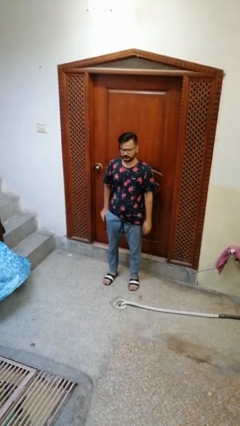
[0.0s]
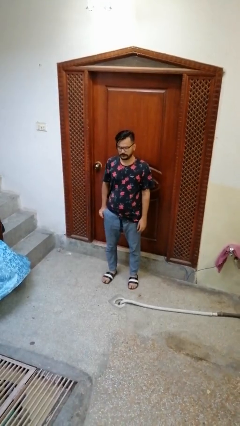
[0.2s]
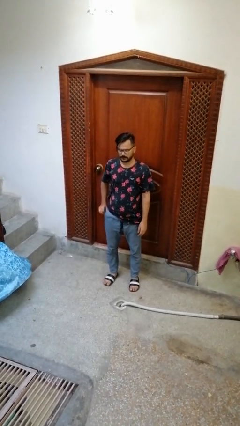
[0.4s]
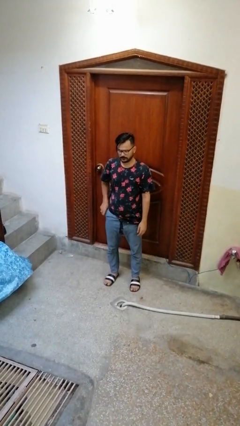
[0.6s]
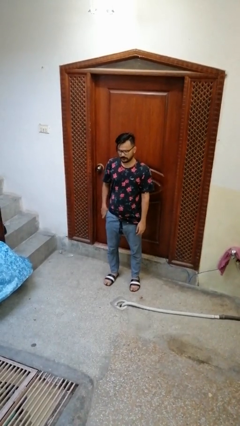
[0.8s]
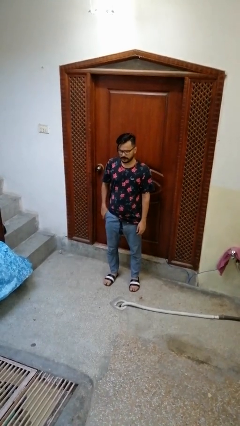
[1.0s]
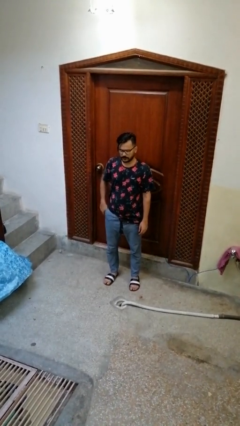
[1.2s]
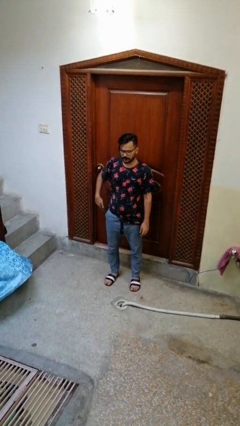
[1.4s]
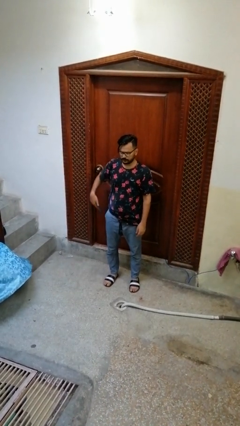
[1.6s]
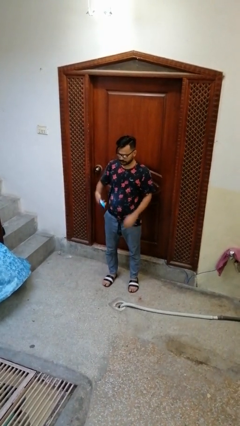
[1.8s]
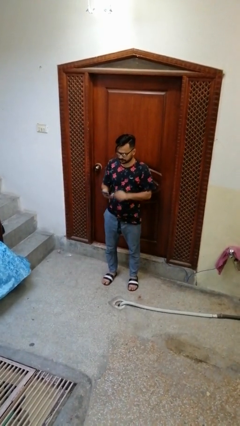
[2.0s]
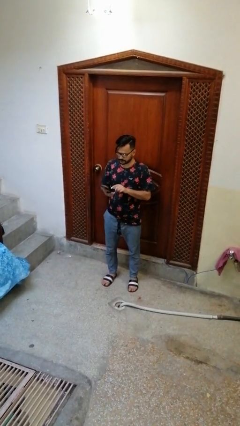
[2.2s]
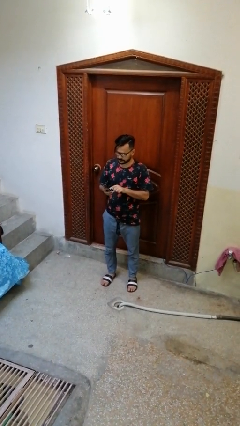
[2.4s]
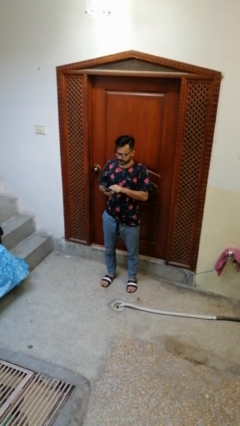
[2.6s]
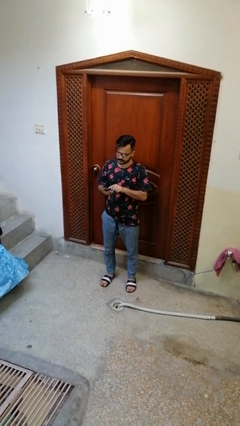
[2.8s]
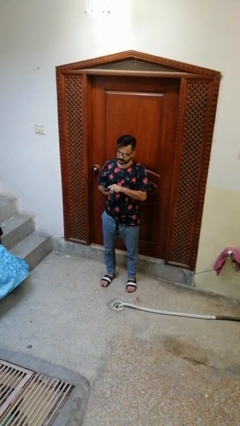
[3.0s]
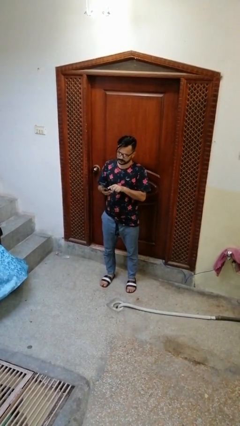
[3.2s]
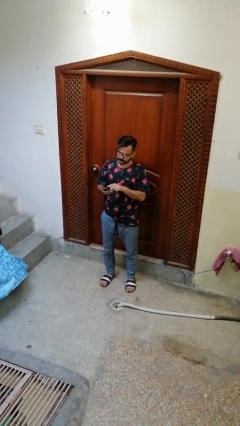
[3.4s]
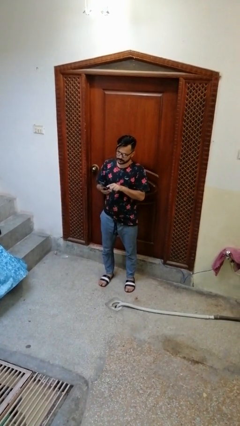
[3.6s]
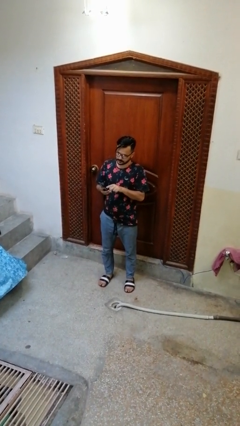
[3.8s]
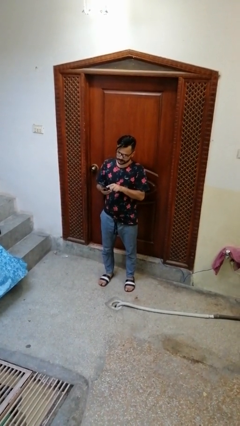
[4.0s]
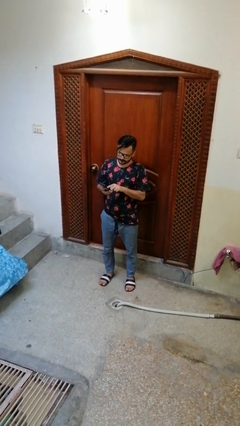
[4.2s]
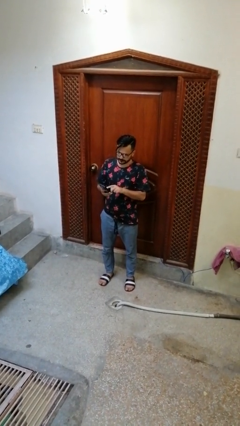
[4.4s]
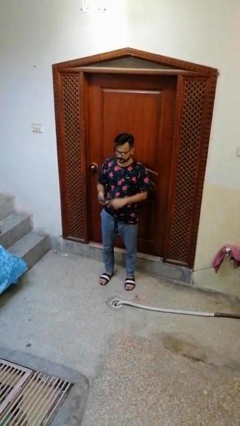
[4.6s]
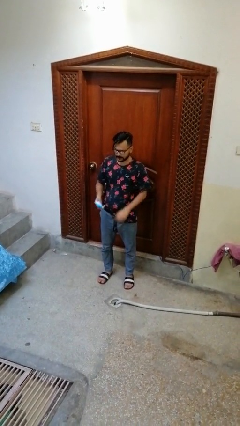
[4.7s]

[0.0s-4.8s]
person takes phone from pocket

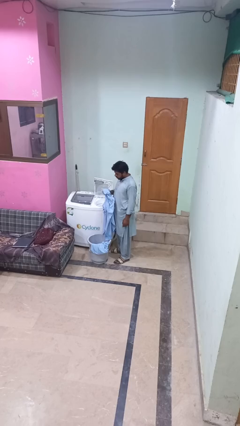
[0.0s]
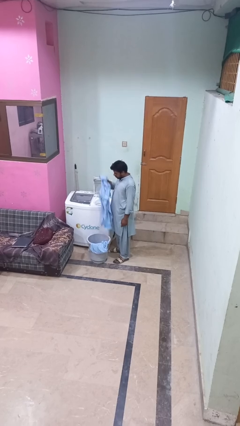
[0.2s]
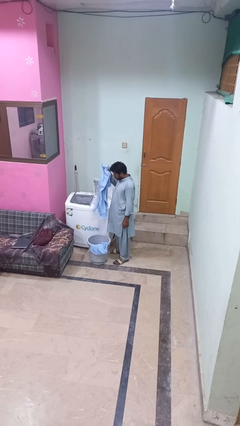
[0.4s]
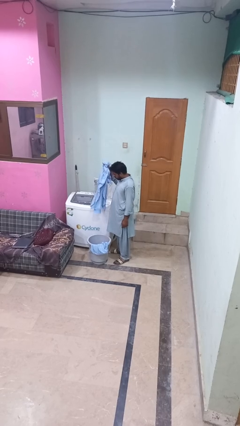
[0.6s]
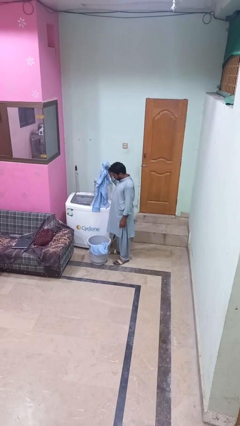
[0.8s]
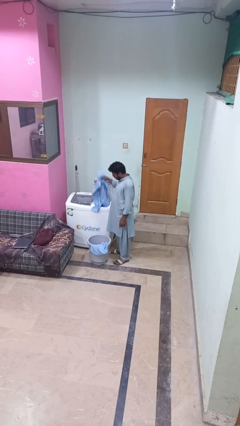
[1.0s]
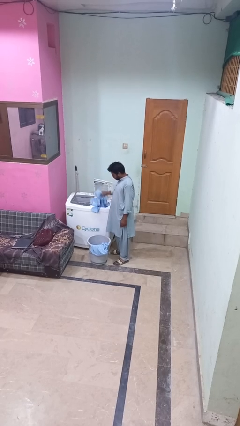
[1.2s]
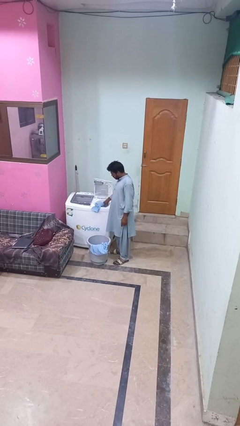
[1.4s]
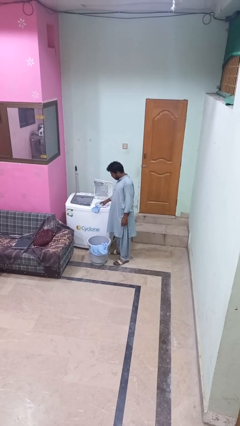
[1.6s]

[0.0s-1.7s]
person loads dryer

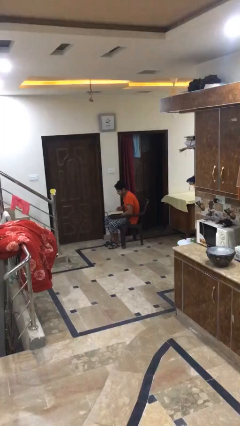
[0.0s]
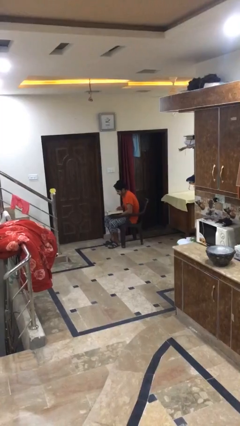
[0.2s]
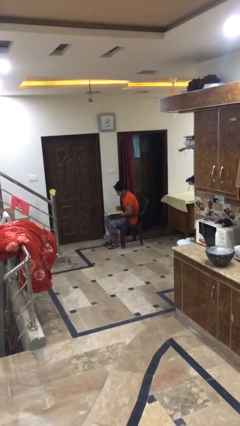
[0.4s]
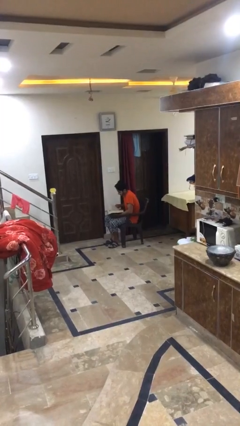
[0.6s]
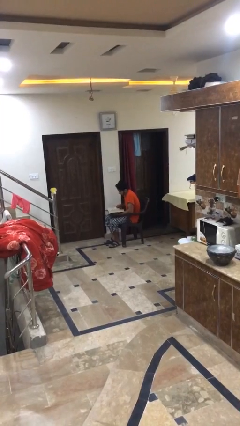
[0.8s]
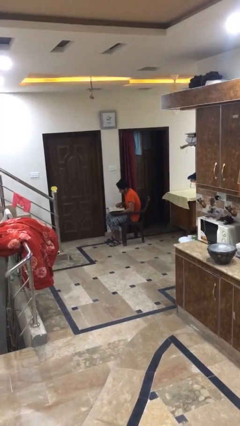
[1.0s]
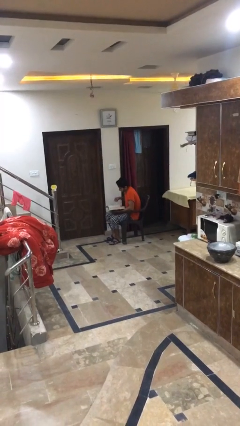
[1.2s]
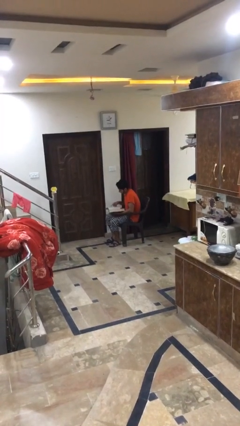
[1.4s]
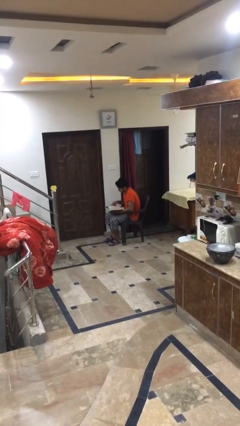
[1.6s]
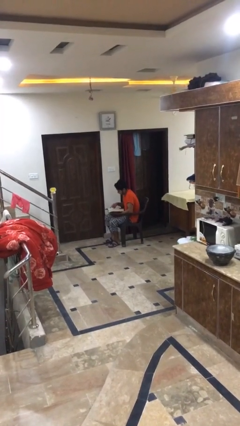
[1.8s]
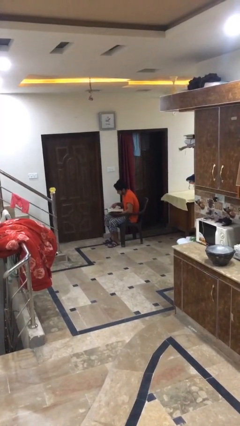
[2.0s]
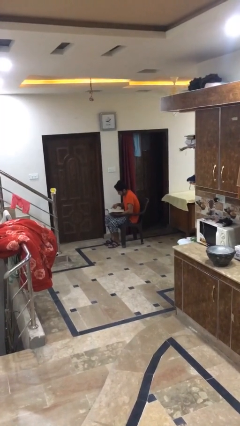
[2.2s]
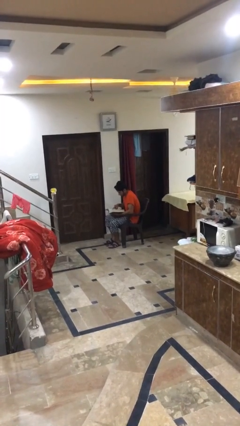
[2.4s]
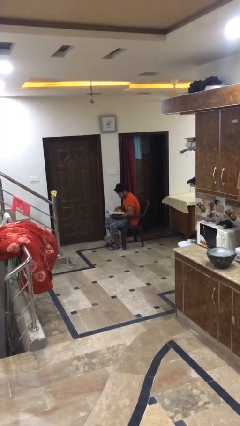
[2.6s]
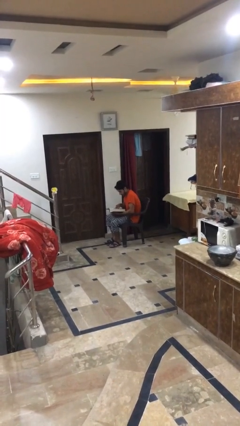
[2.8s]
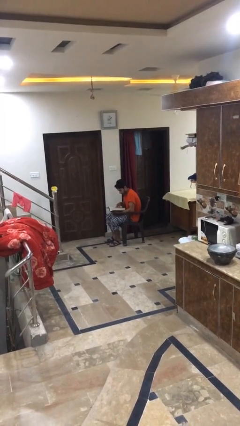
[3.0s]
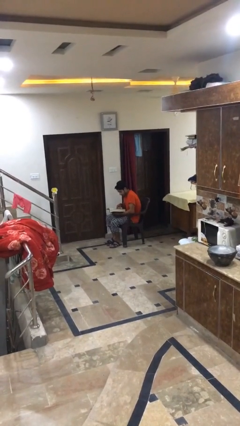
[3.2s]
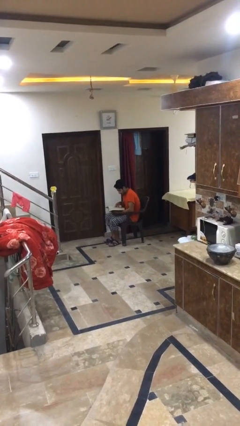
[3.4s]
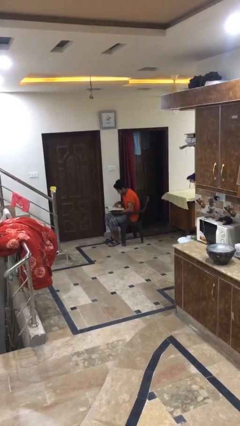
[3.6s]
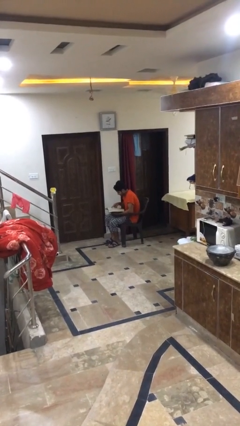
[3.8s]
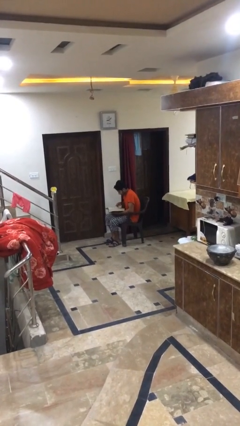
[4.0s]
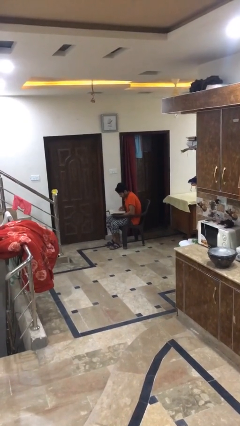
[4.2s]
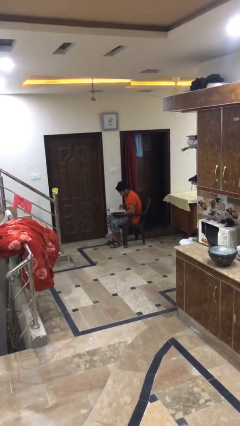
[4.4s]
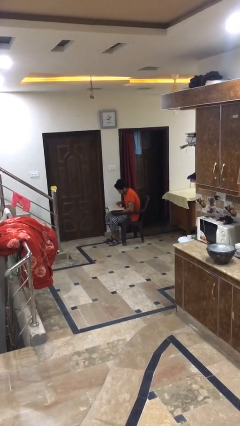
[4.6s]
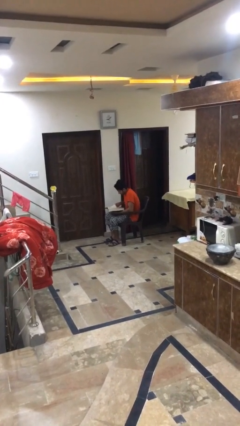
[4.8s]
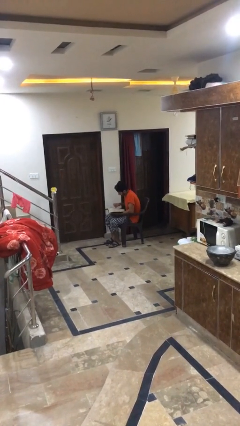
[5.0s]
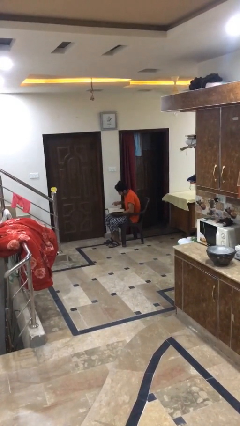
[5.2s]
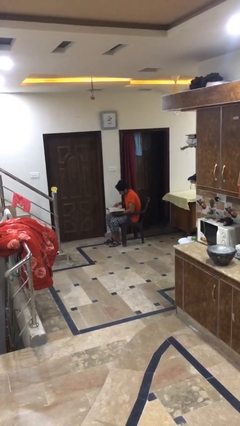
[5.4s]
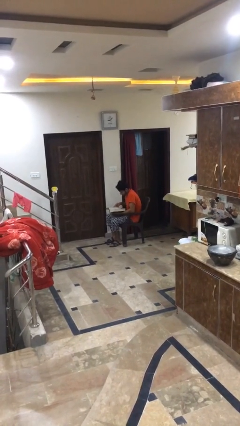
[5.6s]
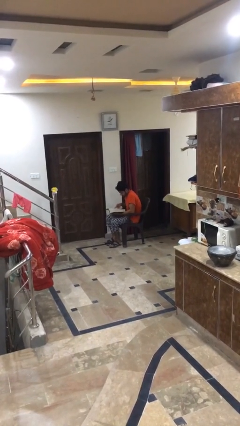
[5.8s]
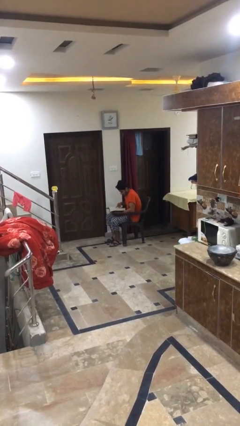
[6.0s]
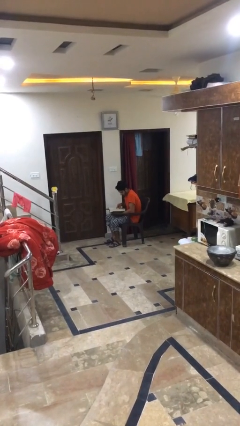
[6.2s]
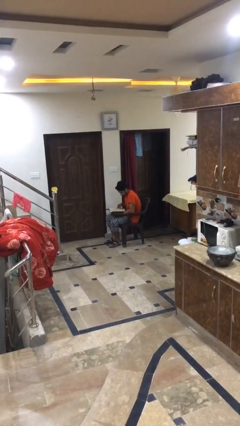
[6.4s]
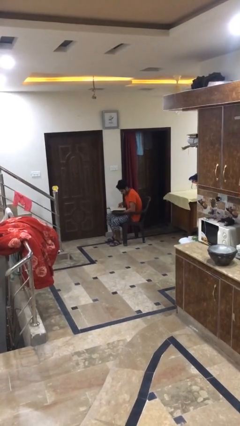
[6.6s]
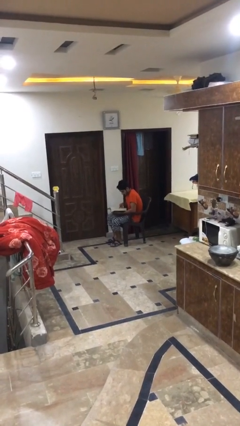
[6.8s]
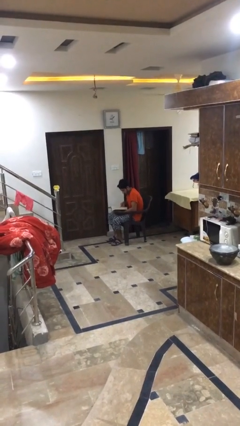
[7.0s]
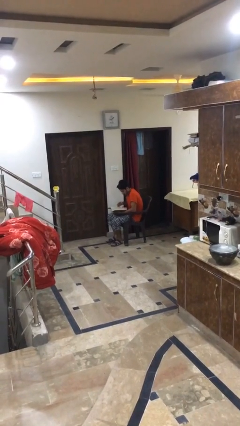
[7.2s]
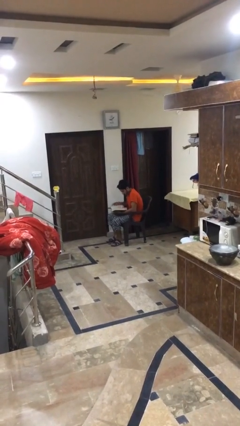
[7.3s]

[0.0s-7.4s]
person reads document

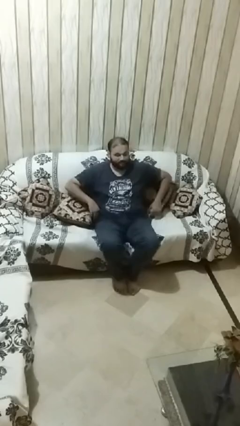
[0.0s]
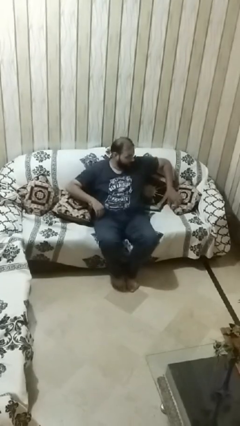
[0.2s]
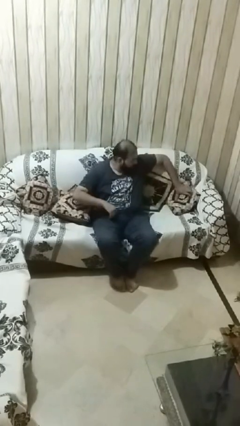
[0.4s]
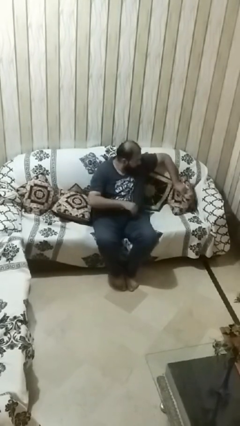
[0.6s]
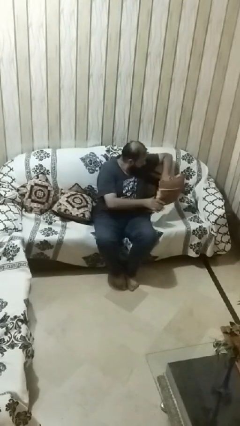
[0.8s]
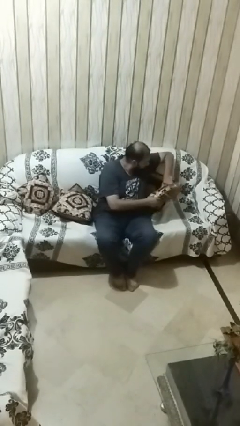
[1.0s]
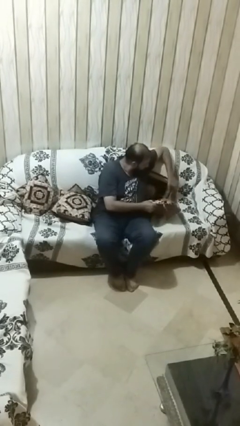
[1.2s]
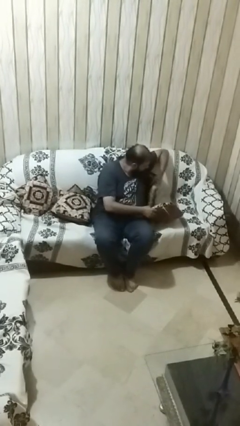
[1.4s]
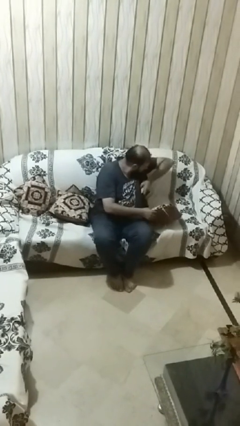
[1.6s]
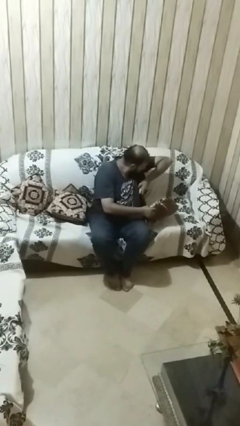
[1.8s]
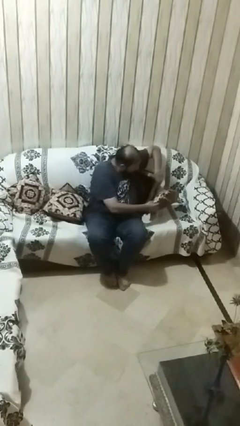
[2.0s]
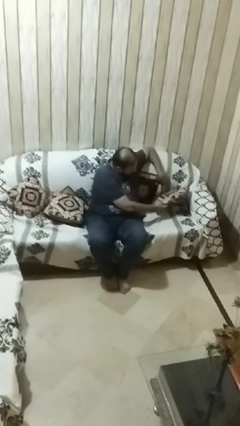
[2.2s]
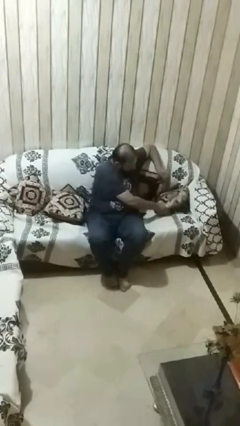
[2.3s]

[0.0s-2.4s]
person searches in couch

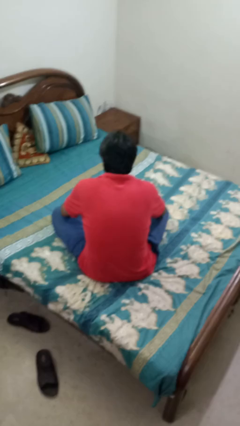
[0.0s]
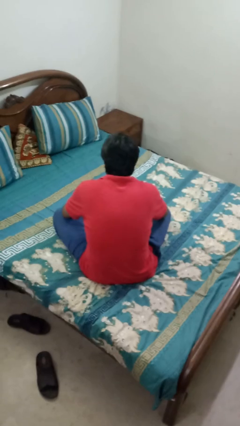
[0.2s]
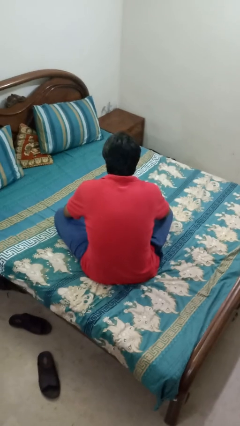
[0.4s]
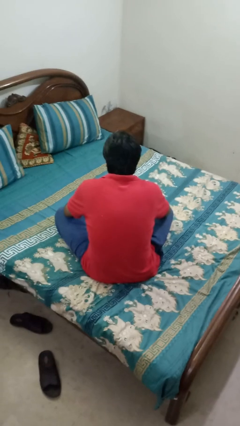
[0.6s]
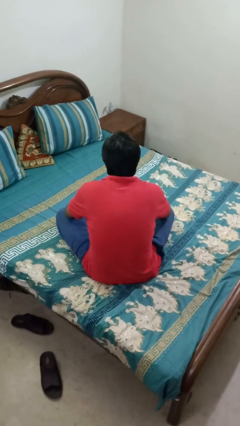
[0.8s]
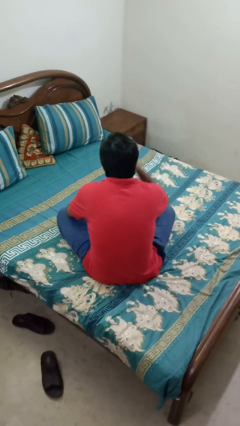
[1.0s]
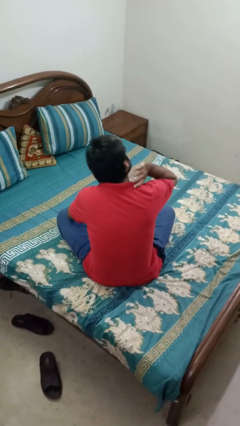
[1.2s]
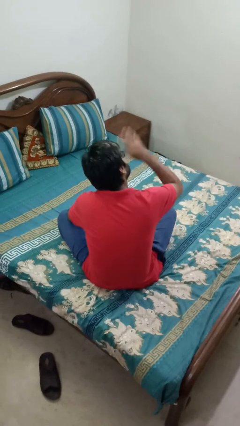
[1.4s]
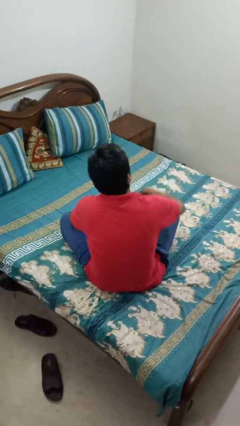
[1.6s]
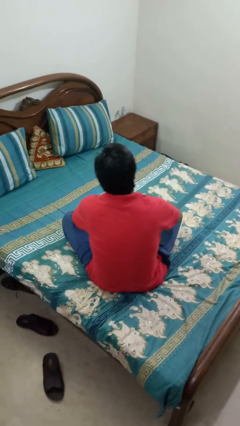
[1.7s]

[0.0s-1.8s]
person swats bug
